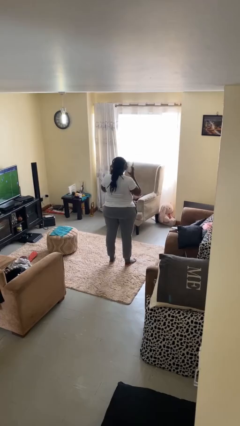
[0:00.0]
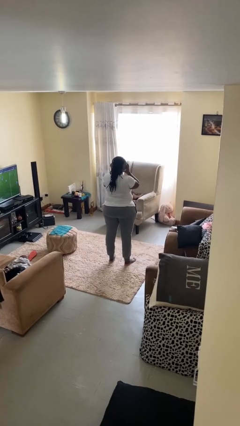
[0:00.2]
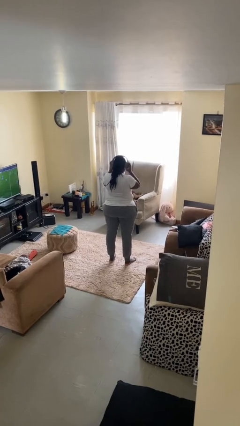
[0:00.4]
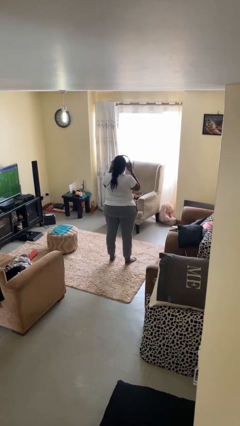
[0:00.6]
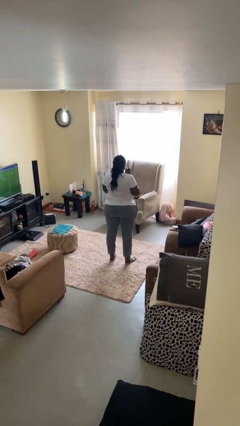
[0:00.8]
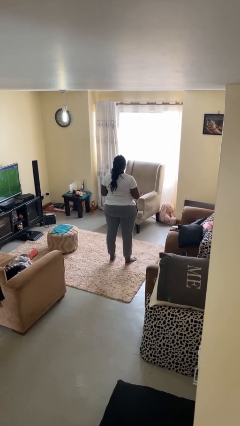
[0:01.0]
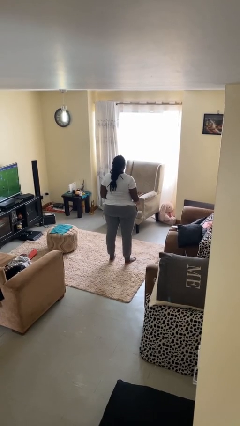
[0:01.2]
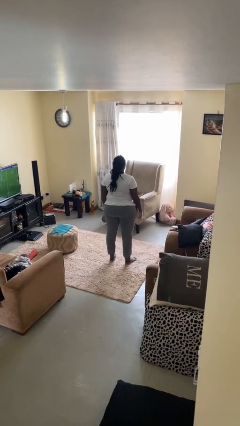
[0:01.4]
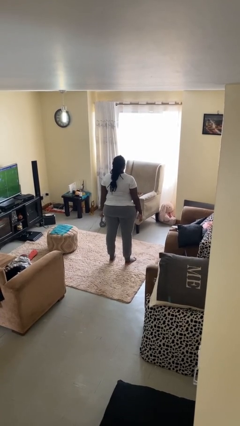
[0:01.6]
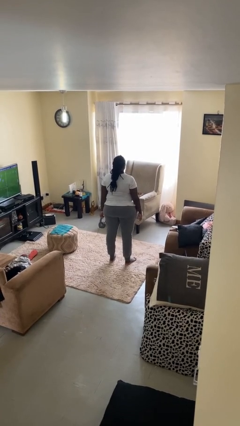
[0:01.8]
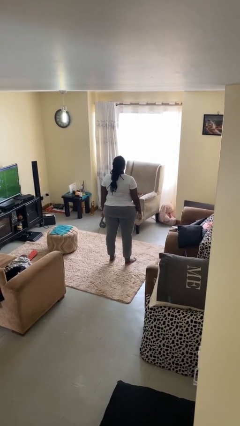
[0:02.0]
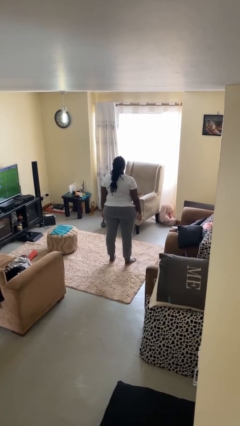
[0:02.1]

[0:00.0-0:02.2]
person takes off headphones

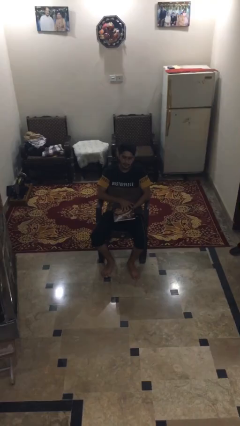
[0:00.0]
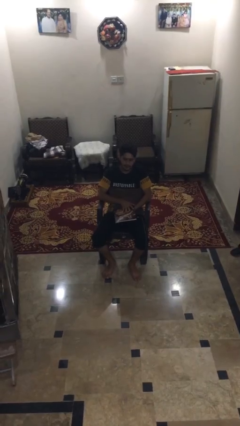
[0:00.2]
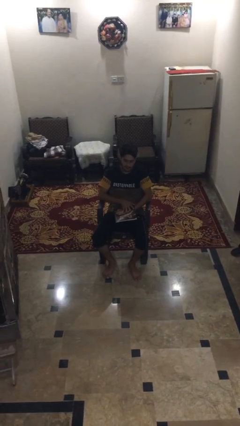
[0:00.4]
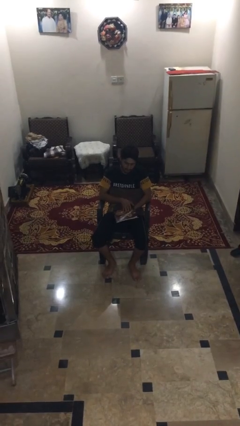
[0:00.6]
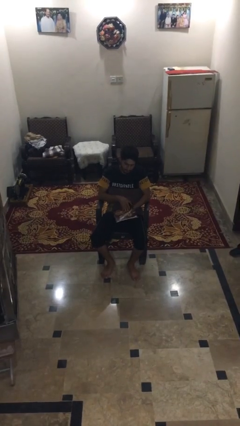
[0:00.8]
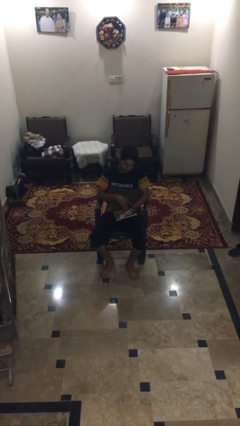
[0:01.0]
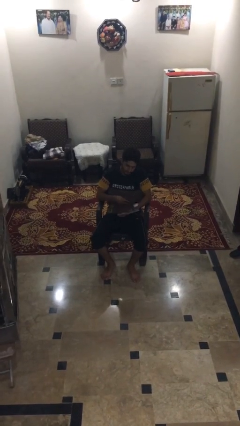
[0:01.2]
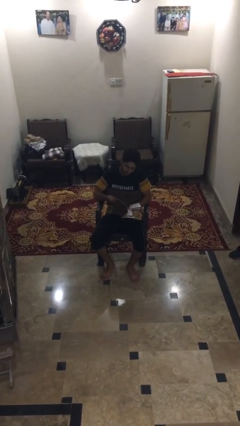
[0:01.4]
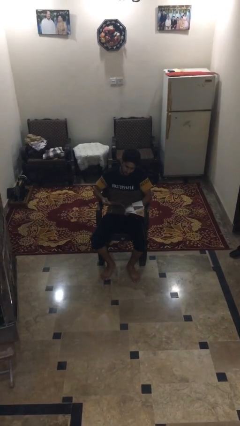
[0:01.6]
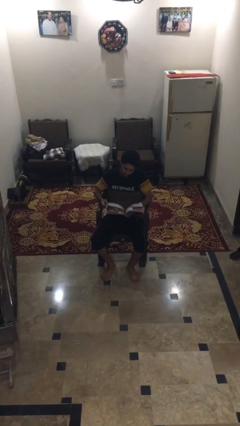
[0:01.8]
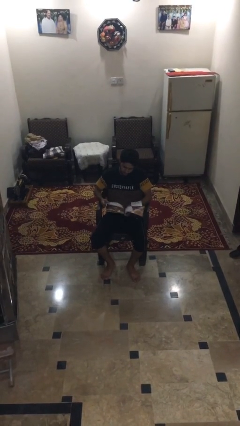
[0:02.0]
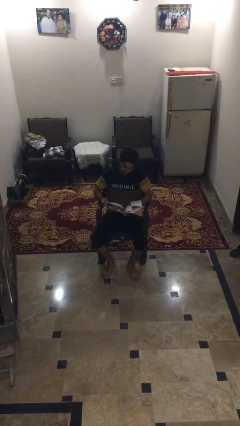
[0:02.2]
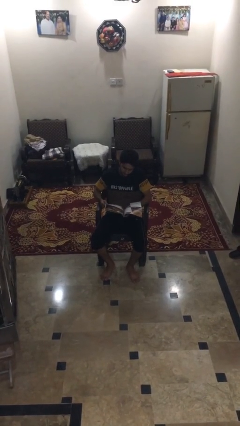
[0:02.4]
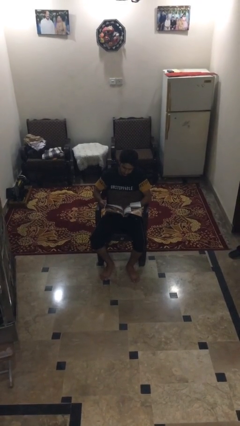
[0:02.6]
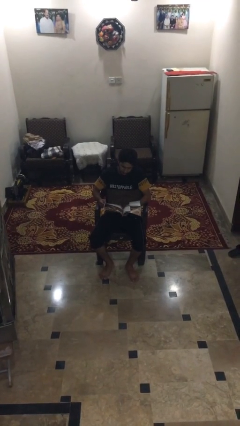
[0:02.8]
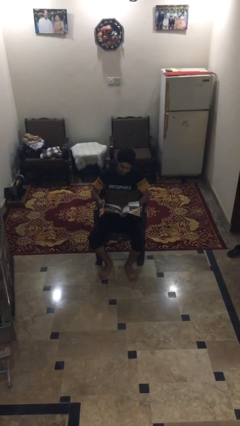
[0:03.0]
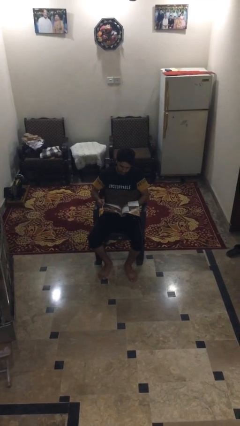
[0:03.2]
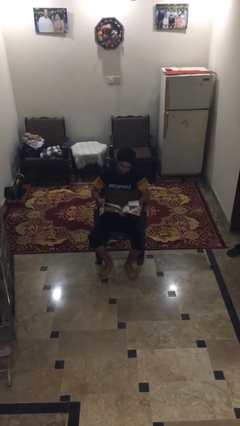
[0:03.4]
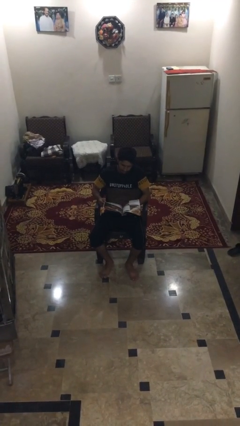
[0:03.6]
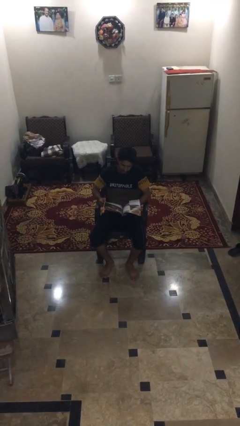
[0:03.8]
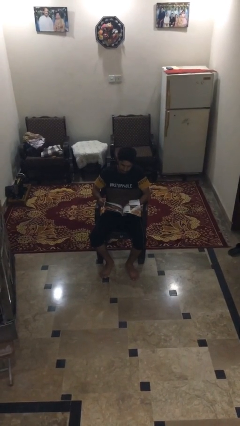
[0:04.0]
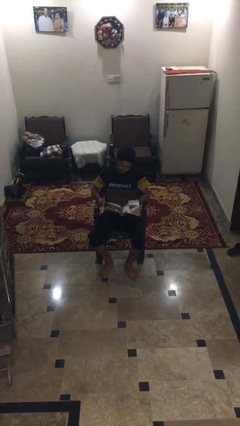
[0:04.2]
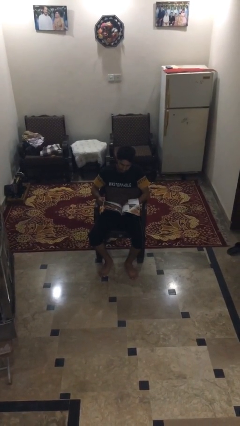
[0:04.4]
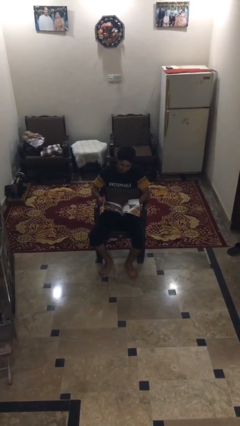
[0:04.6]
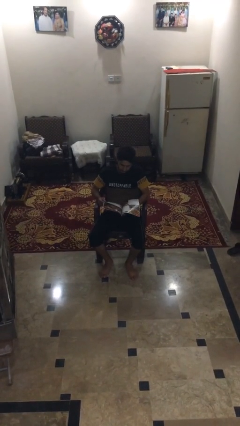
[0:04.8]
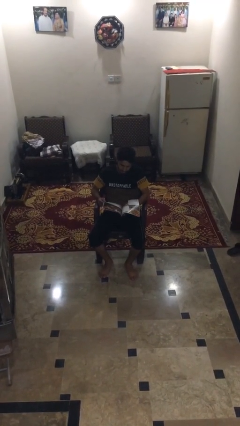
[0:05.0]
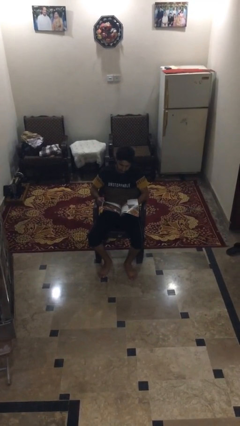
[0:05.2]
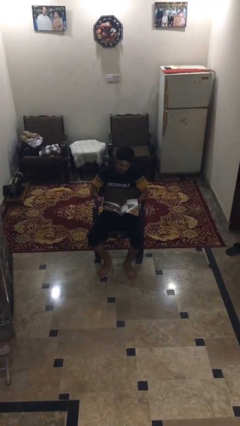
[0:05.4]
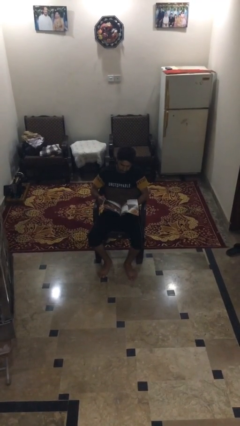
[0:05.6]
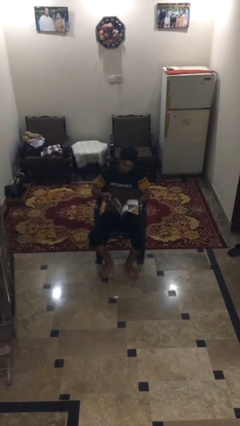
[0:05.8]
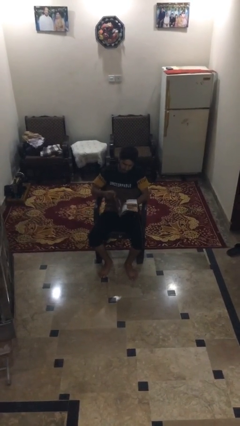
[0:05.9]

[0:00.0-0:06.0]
person reads magazine

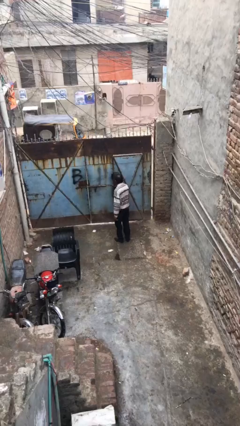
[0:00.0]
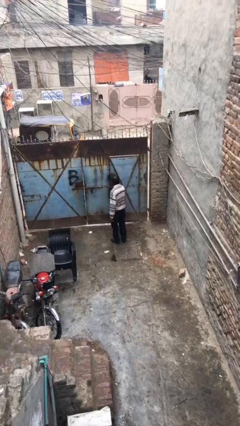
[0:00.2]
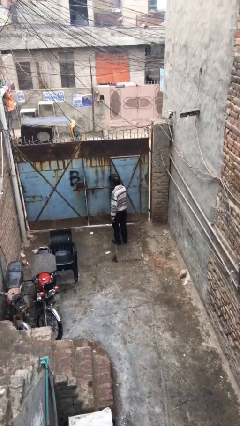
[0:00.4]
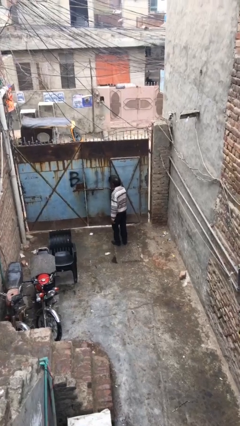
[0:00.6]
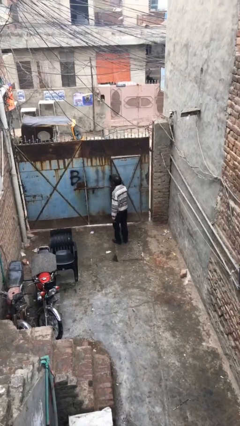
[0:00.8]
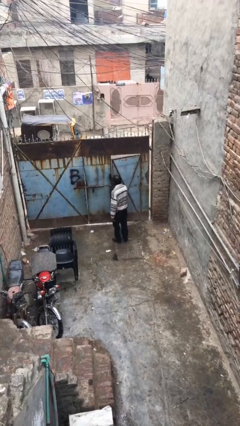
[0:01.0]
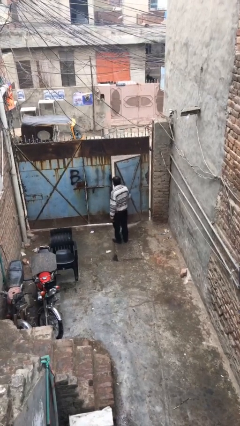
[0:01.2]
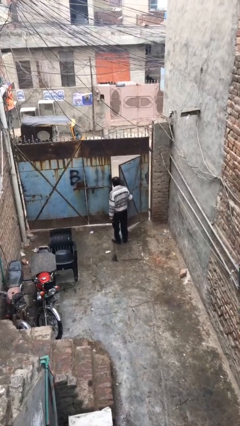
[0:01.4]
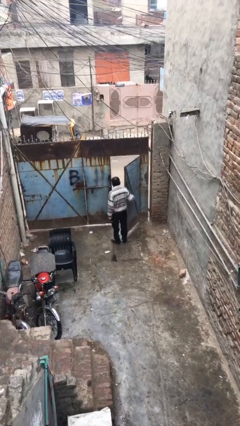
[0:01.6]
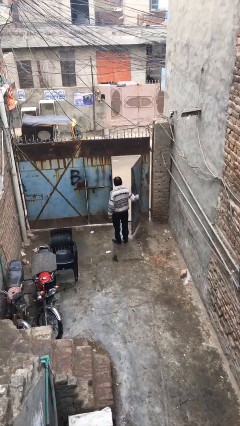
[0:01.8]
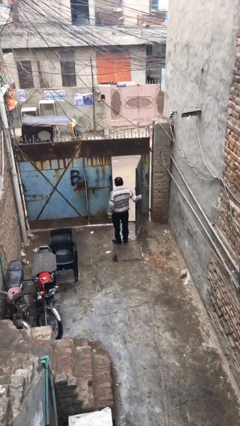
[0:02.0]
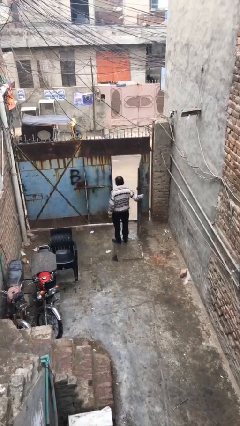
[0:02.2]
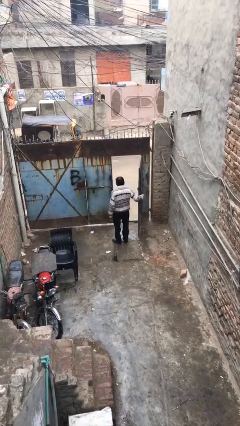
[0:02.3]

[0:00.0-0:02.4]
person opens facility door

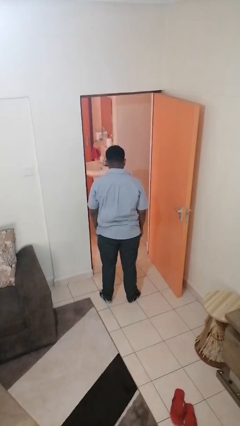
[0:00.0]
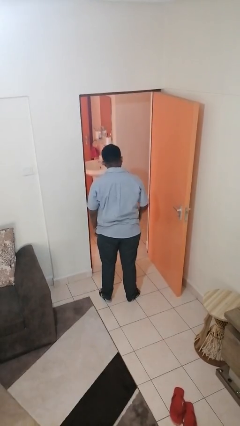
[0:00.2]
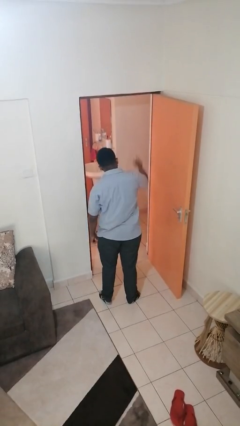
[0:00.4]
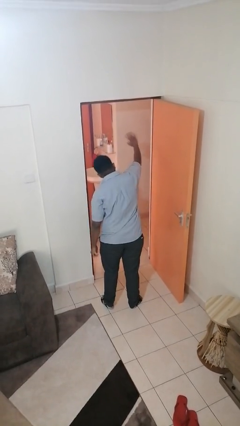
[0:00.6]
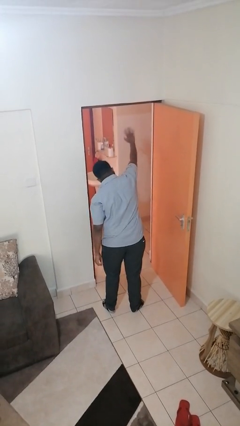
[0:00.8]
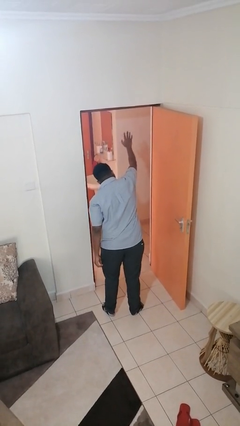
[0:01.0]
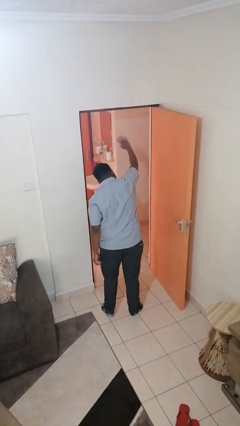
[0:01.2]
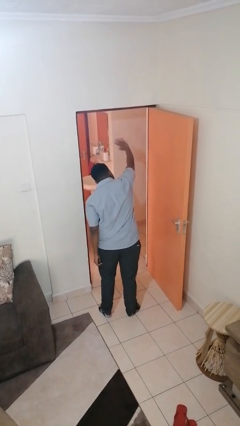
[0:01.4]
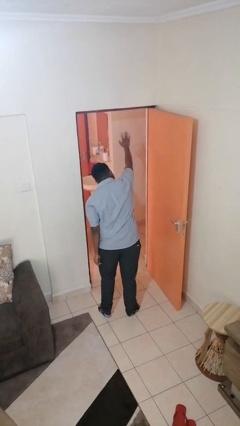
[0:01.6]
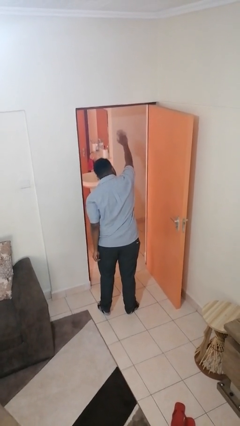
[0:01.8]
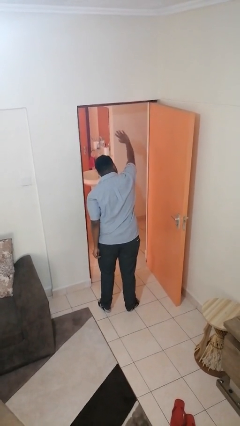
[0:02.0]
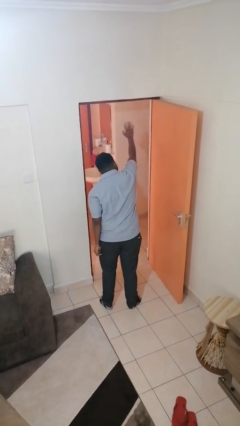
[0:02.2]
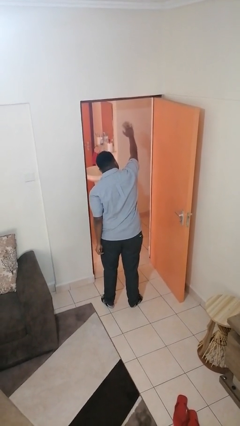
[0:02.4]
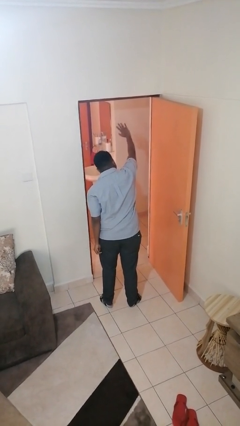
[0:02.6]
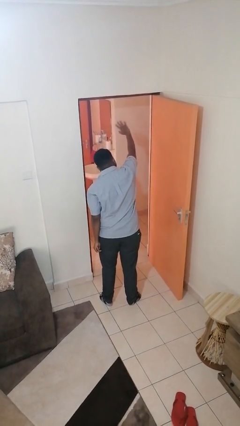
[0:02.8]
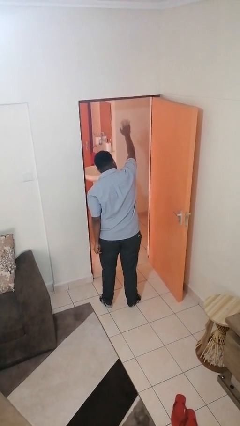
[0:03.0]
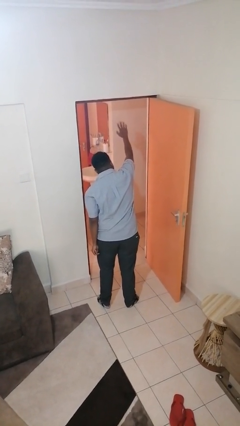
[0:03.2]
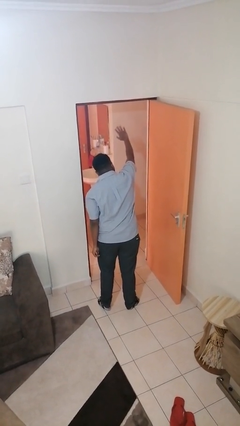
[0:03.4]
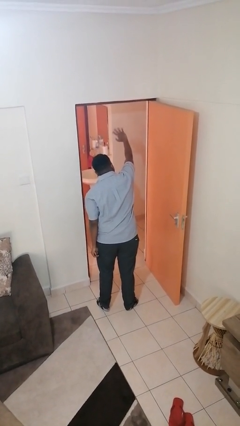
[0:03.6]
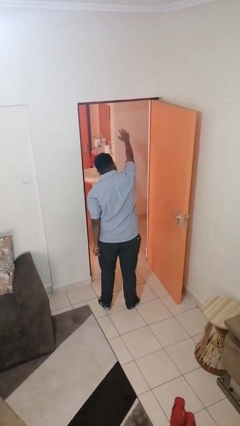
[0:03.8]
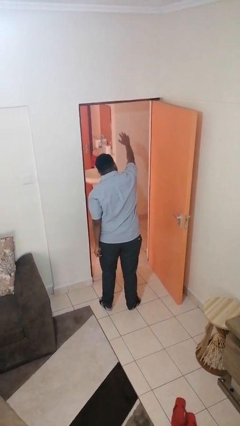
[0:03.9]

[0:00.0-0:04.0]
person waves at person

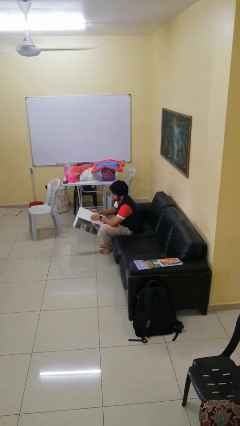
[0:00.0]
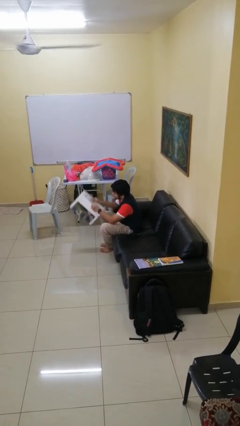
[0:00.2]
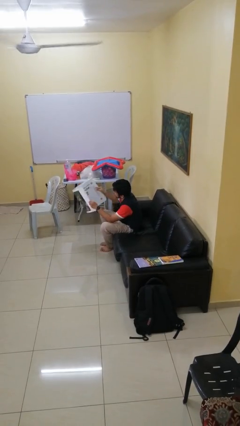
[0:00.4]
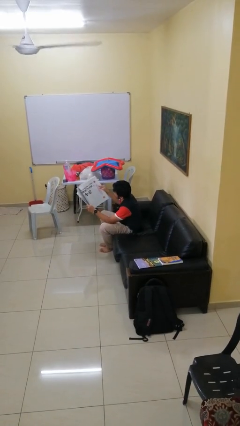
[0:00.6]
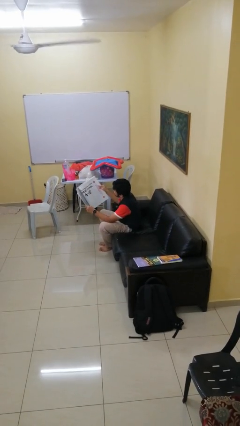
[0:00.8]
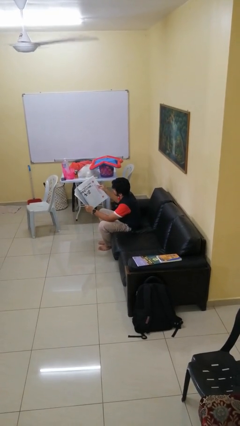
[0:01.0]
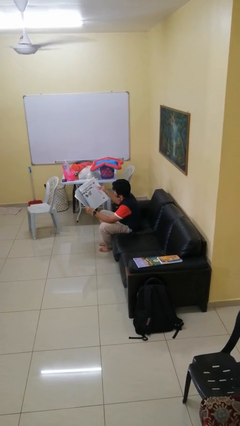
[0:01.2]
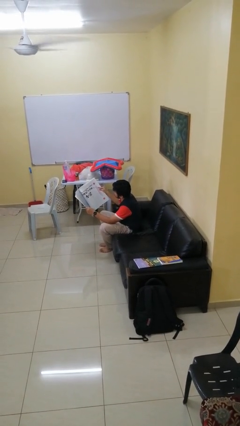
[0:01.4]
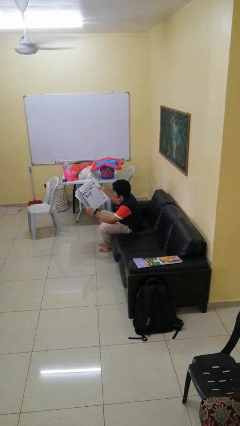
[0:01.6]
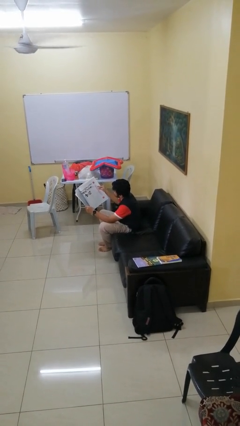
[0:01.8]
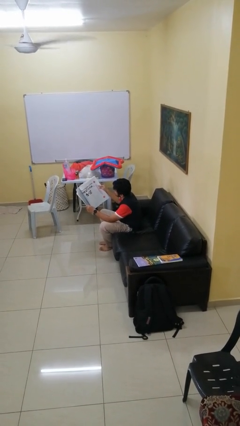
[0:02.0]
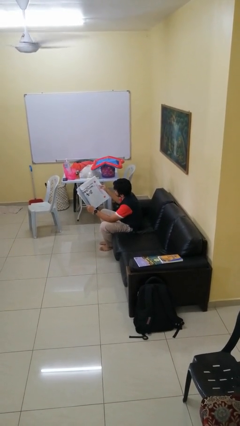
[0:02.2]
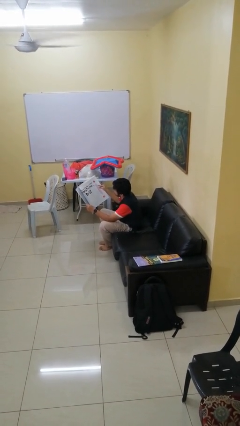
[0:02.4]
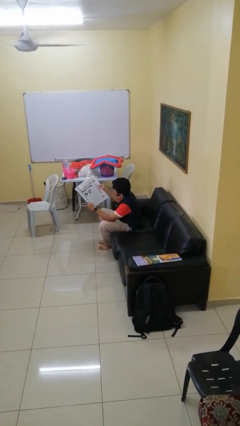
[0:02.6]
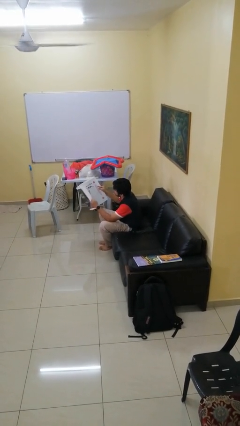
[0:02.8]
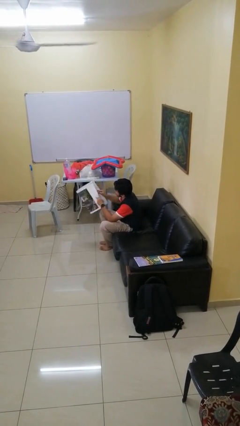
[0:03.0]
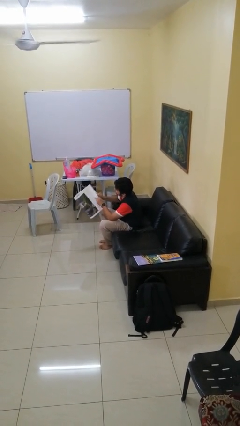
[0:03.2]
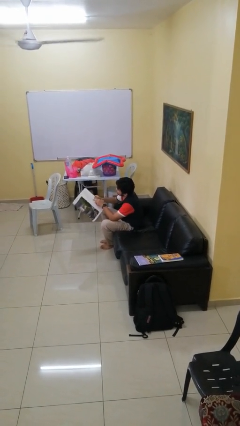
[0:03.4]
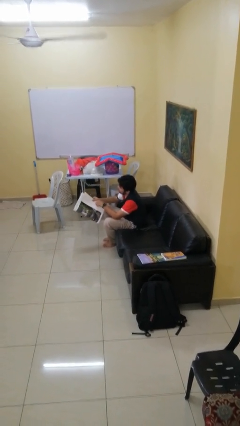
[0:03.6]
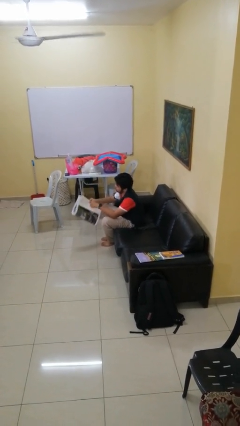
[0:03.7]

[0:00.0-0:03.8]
person reads newspaper
